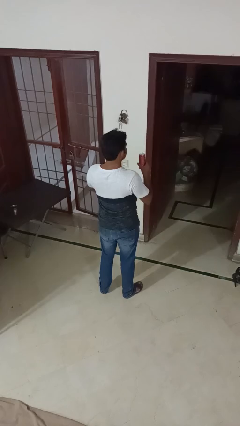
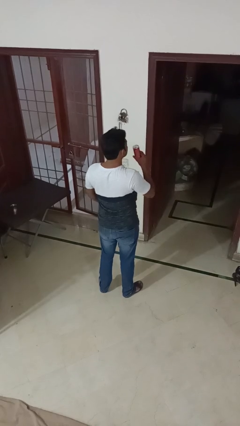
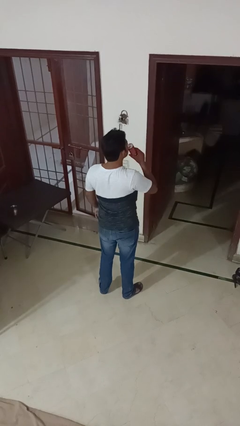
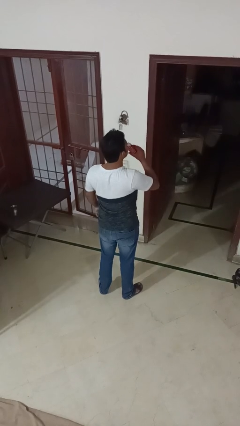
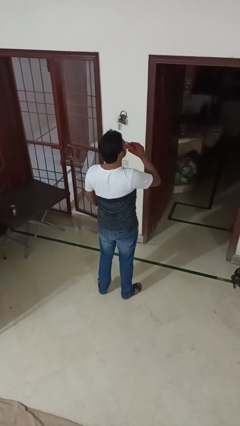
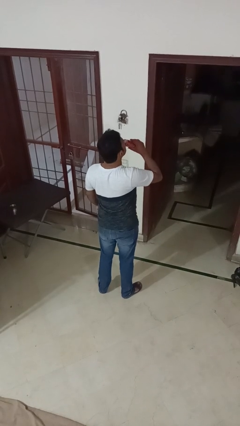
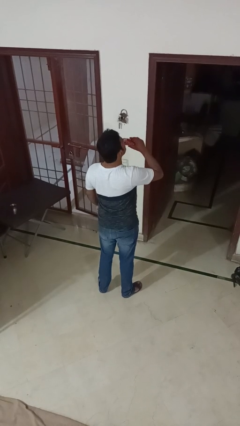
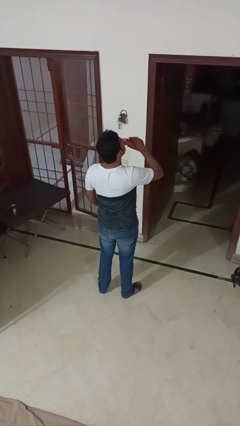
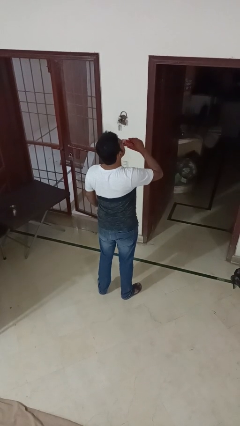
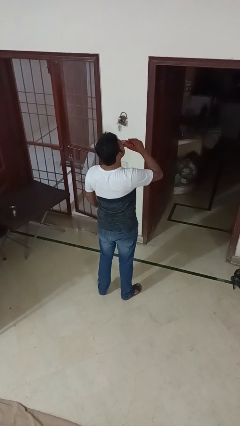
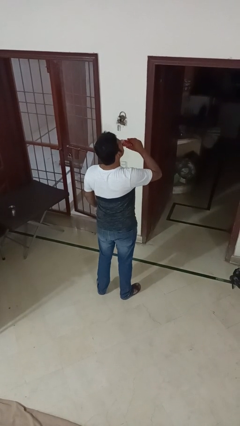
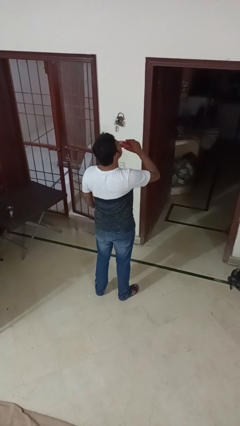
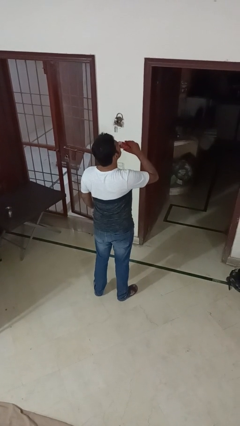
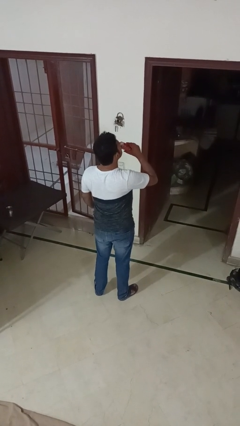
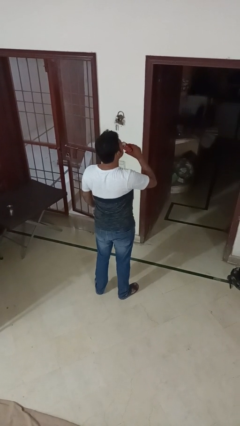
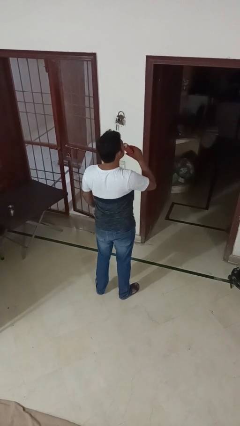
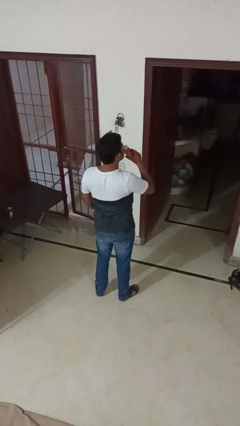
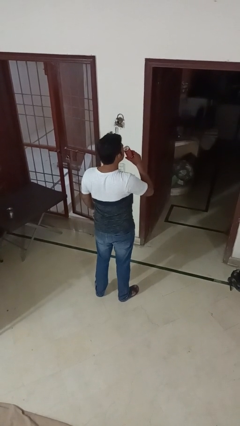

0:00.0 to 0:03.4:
person drinks from beverage can

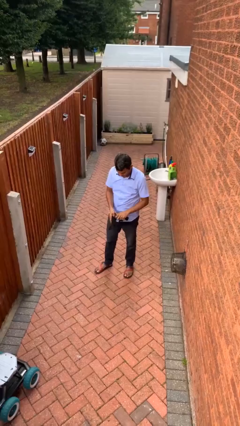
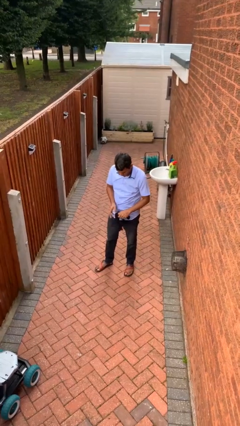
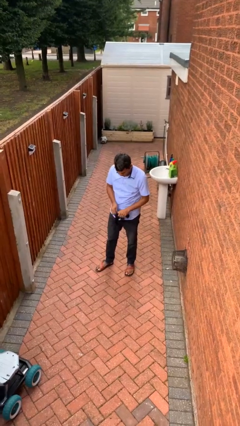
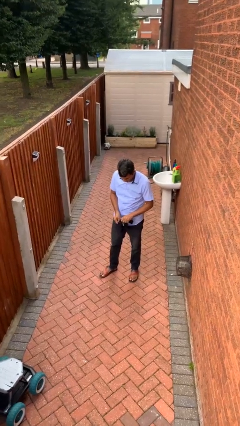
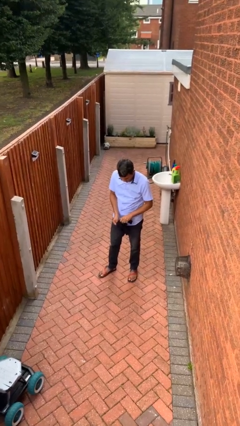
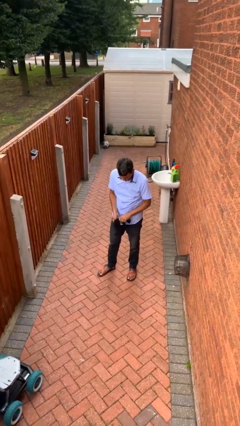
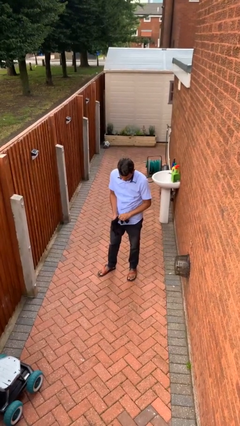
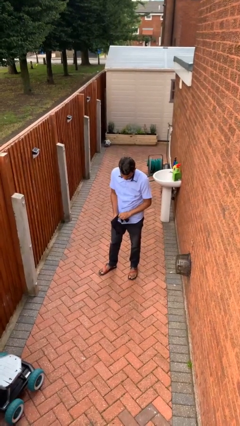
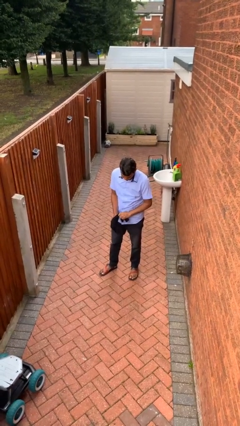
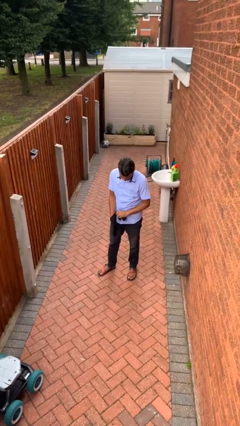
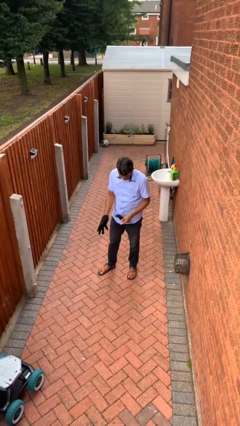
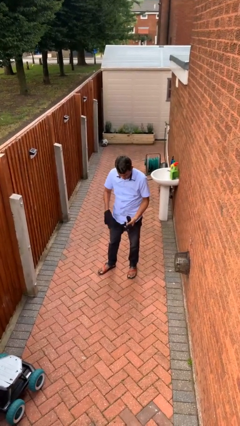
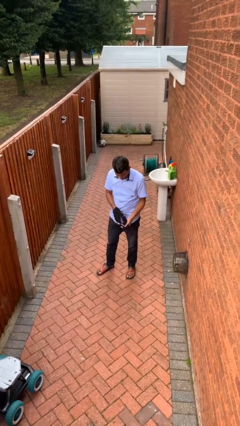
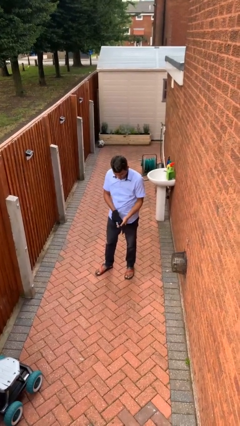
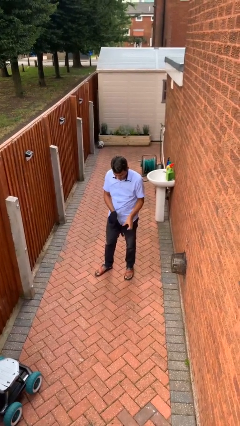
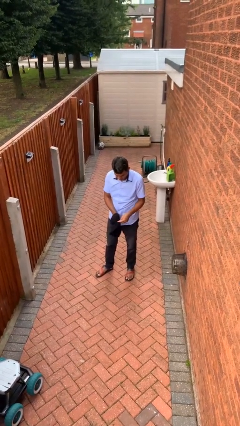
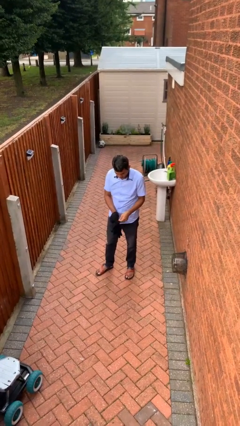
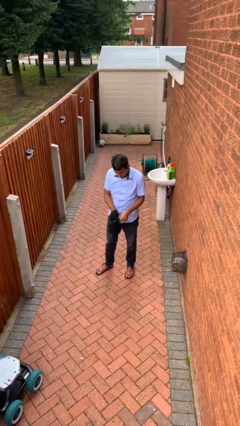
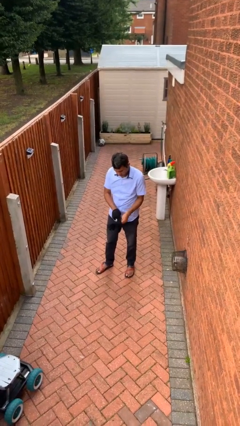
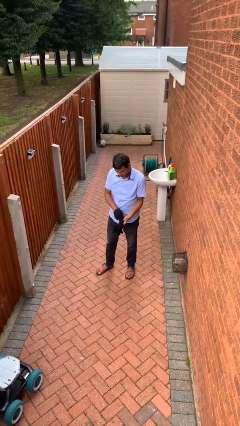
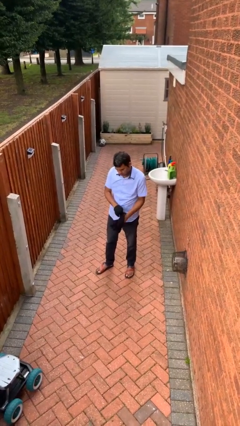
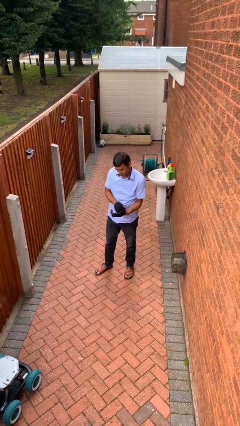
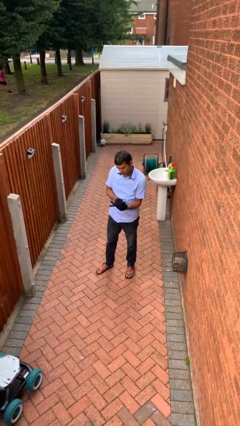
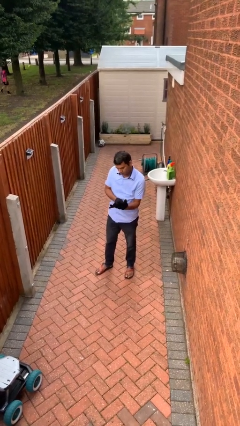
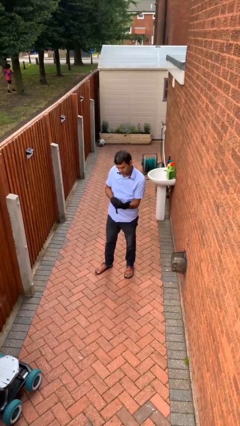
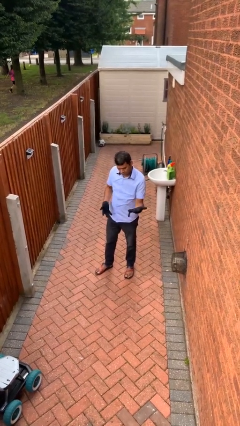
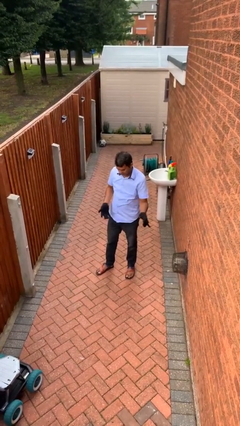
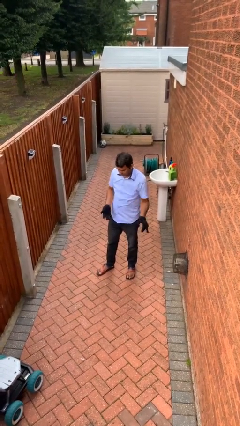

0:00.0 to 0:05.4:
person puts on gloves

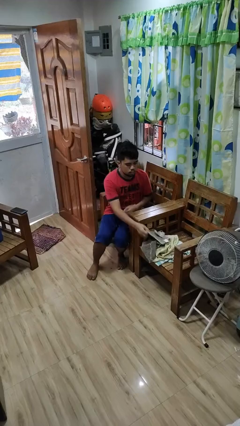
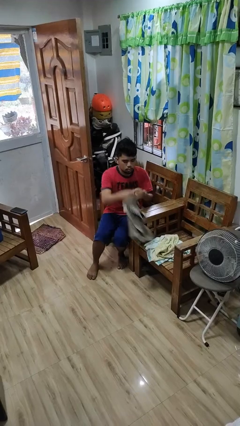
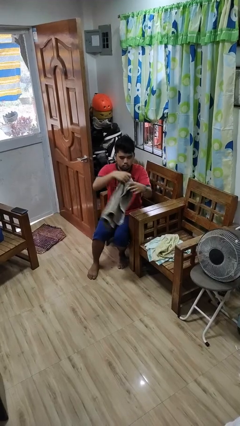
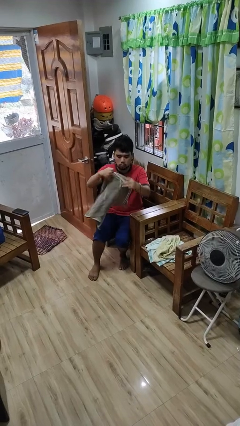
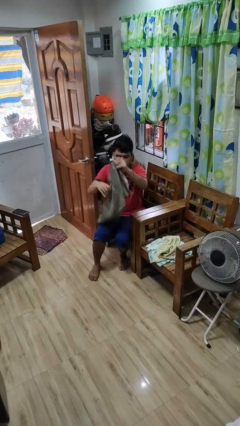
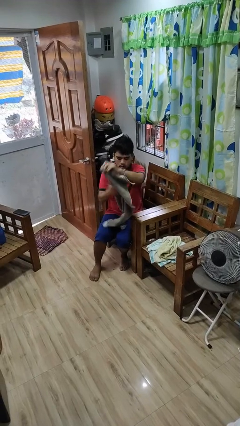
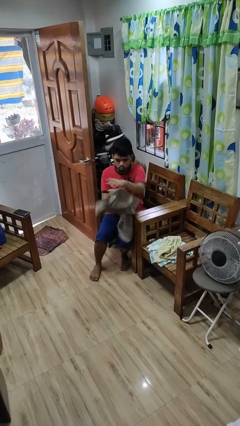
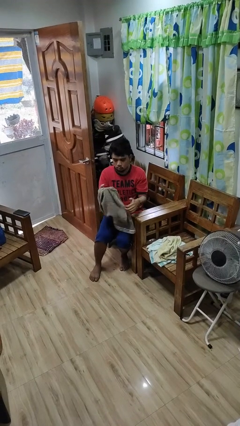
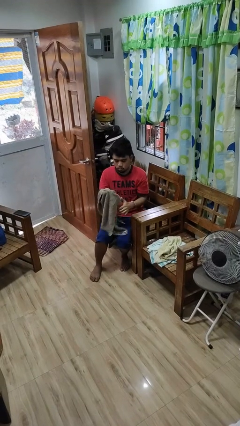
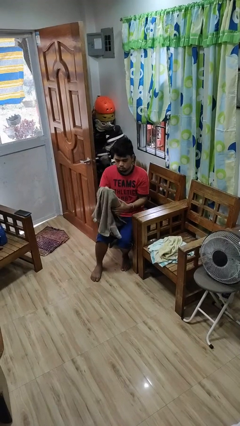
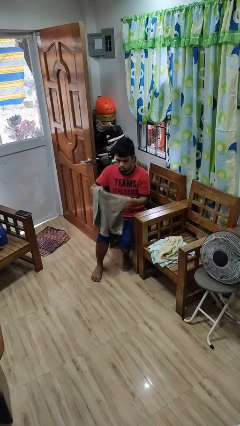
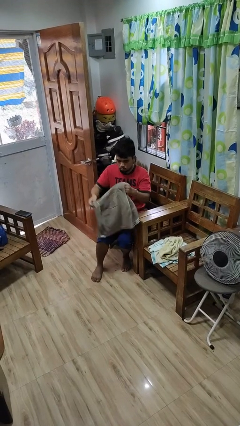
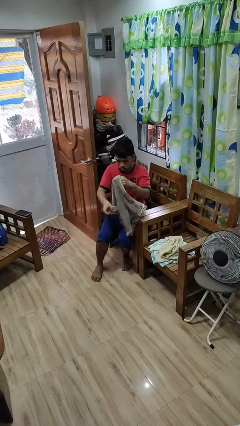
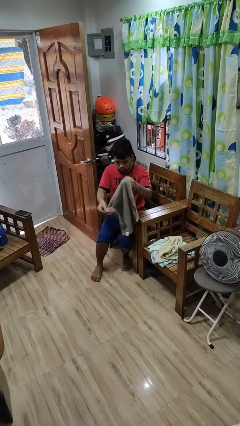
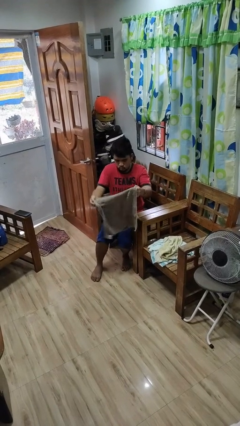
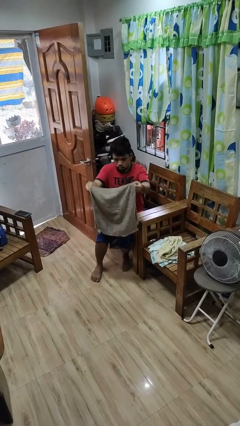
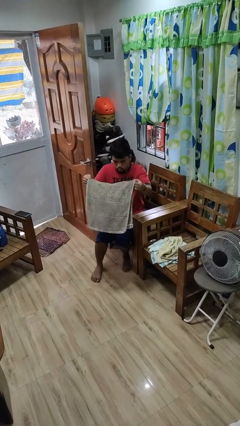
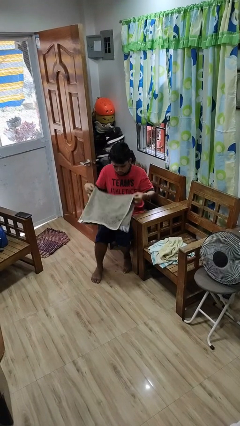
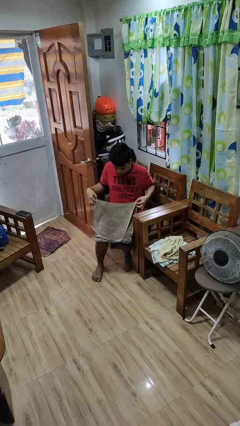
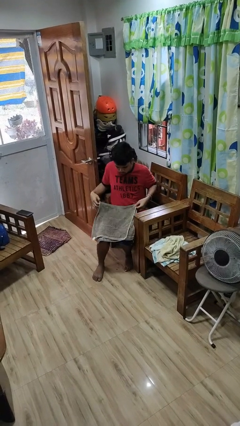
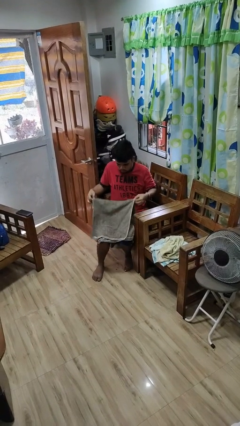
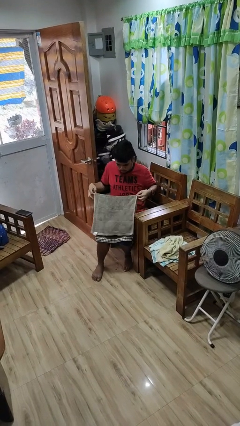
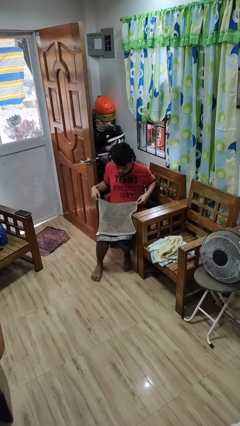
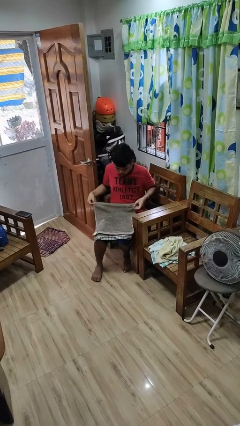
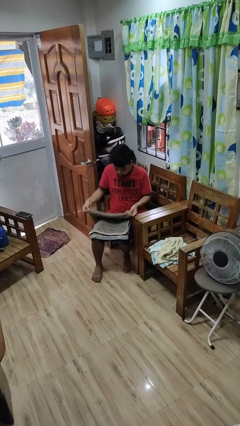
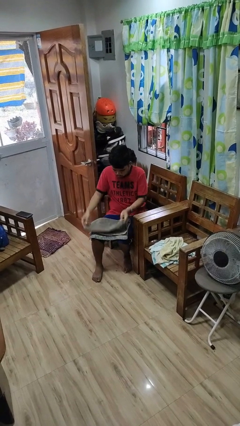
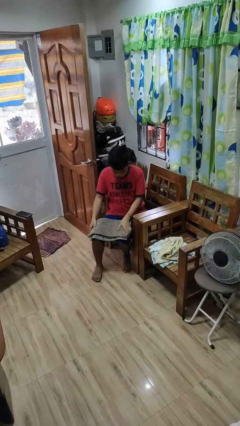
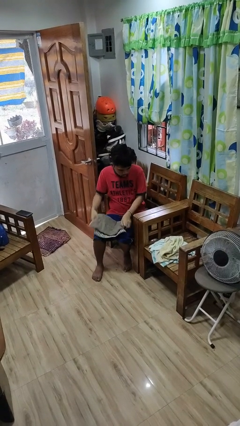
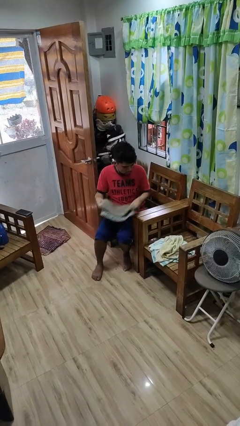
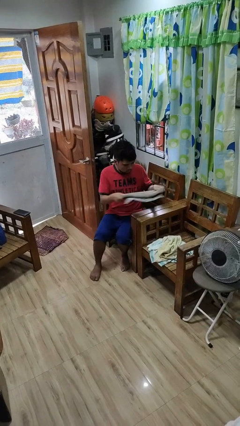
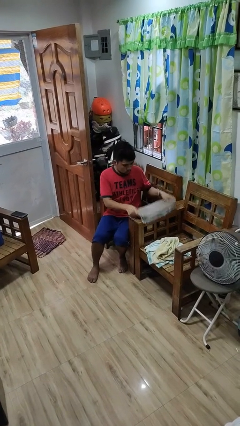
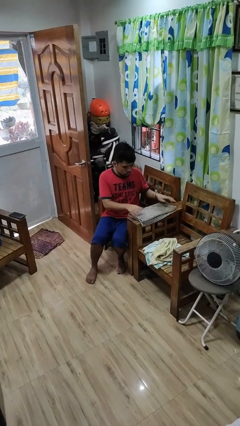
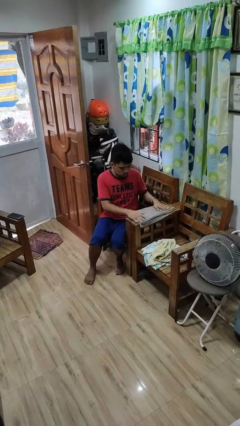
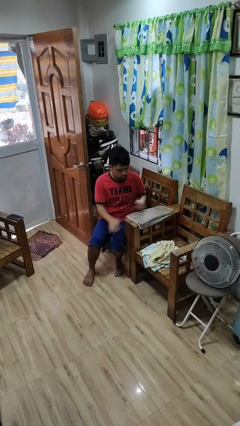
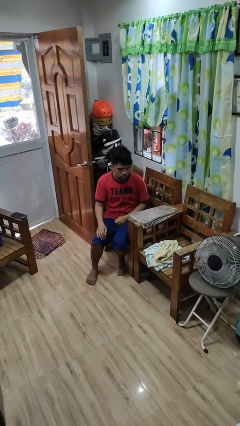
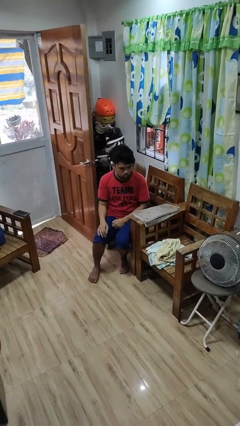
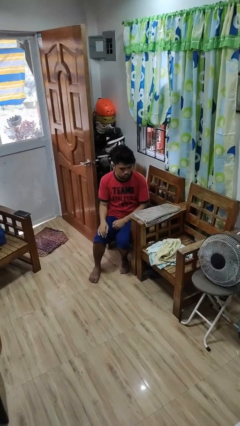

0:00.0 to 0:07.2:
person folds towel

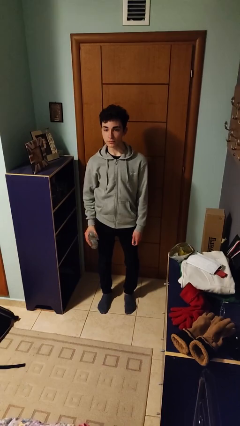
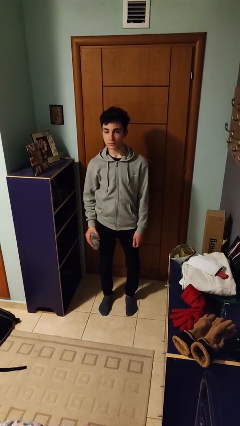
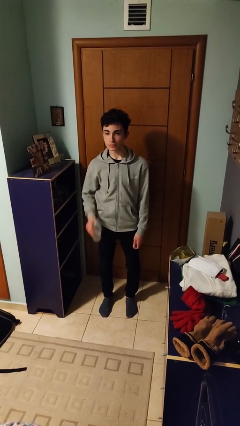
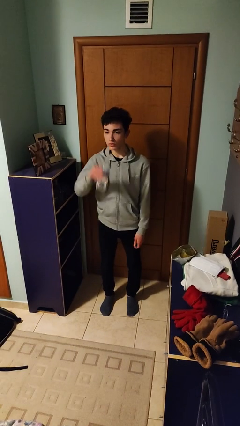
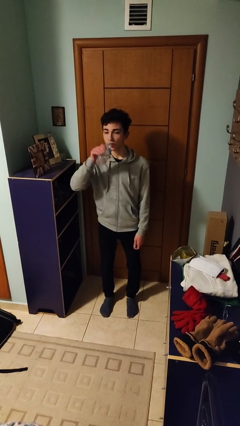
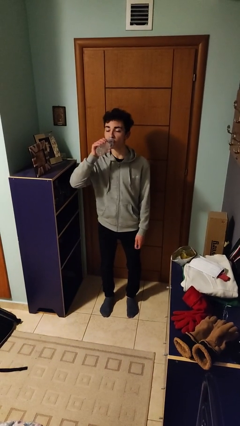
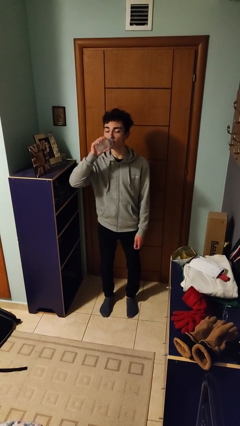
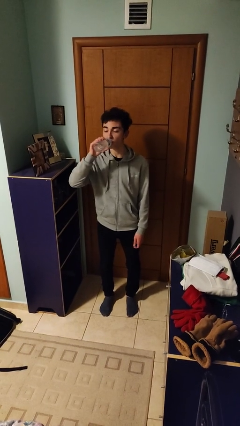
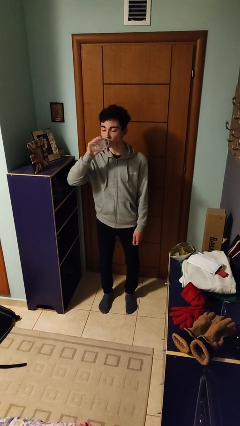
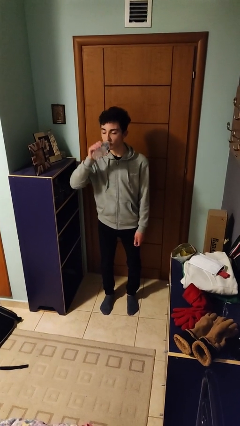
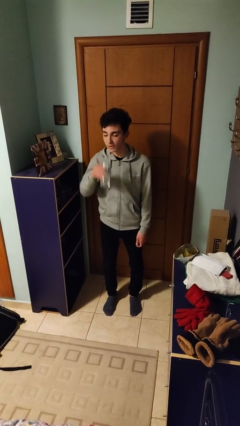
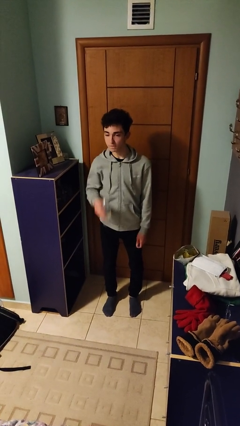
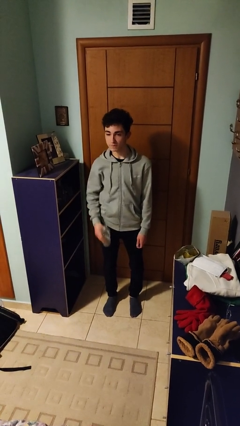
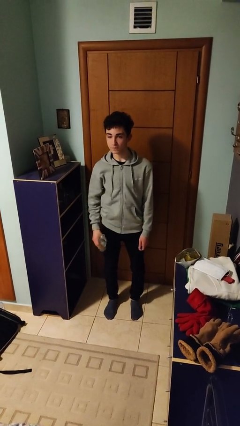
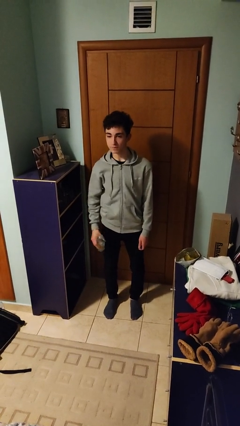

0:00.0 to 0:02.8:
person drinks from bottle
